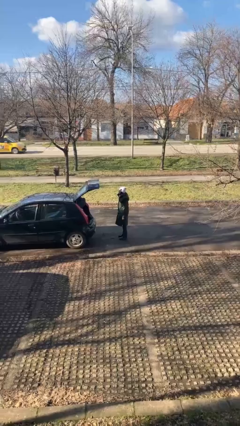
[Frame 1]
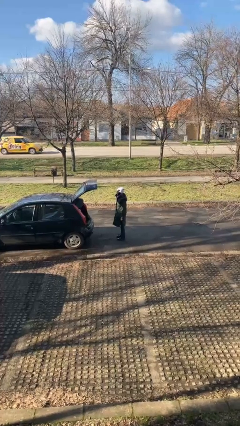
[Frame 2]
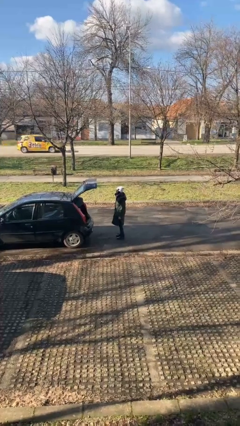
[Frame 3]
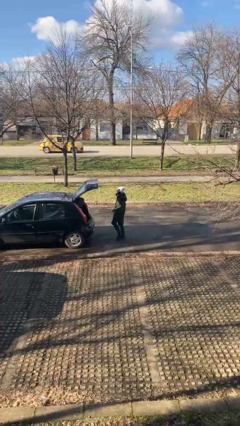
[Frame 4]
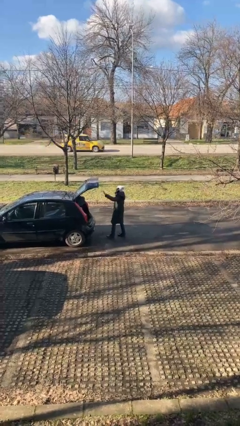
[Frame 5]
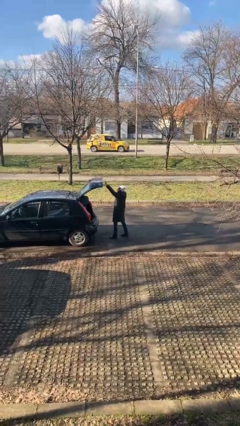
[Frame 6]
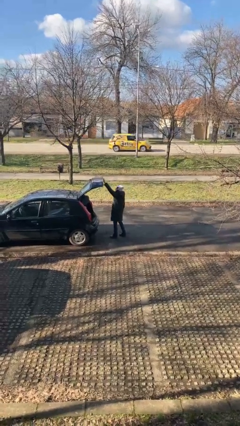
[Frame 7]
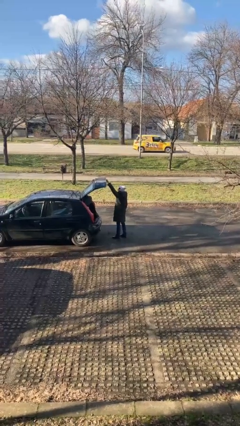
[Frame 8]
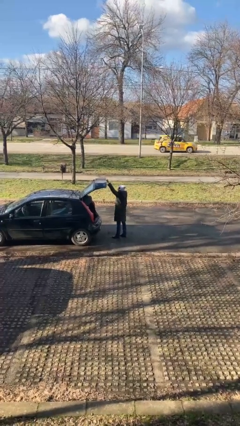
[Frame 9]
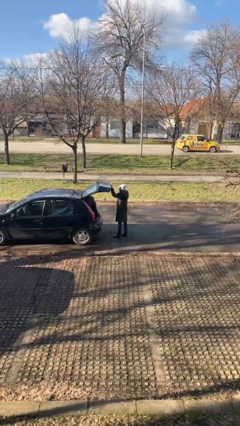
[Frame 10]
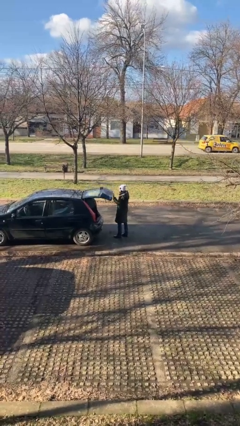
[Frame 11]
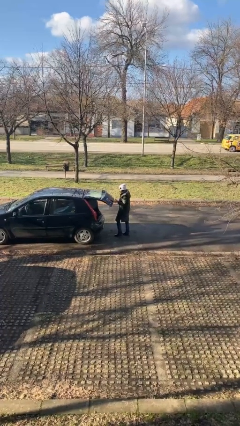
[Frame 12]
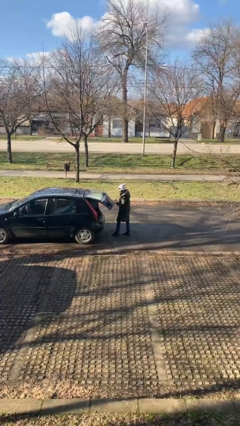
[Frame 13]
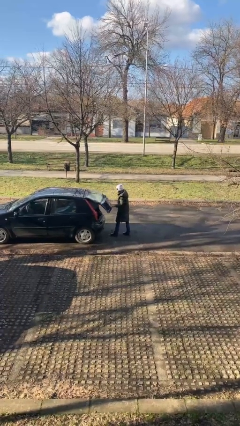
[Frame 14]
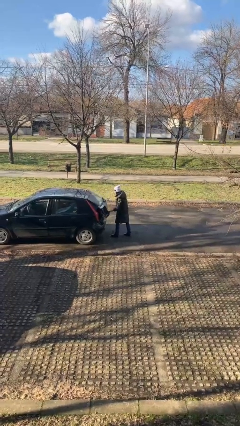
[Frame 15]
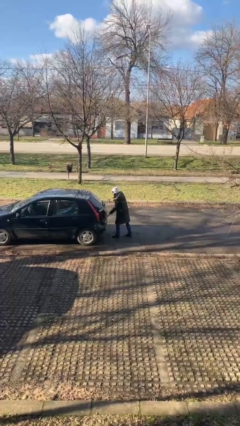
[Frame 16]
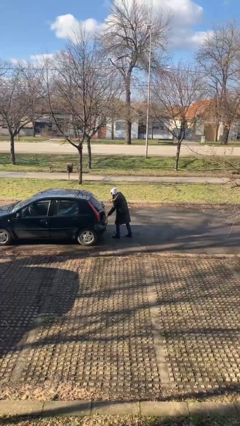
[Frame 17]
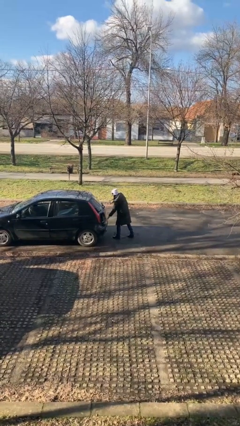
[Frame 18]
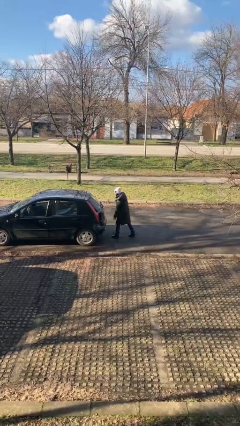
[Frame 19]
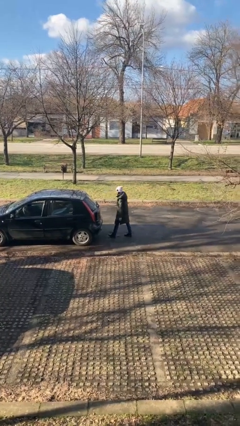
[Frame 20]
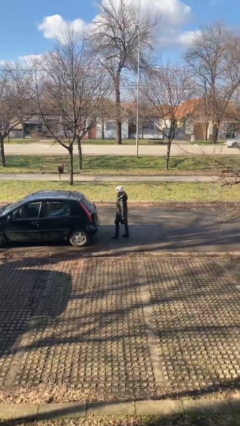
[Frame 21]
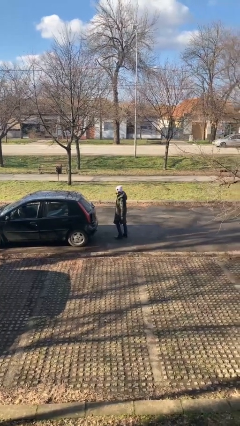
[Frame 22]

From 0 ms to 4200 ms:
person closes car trunk

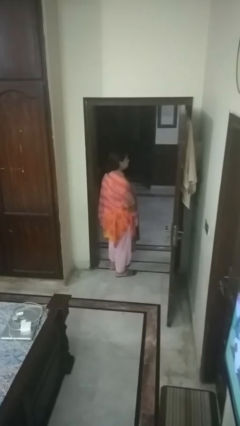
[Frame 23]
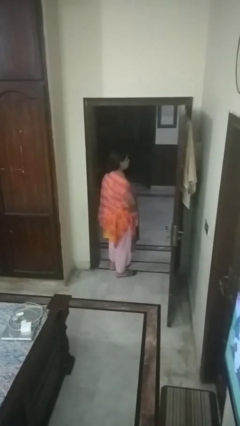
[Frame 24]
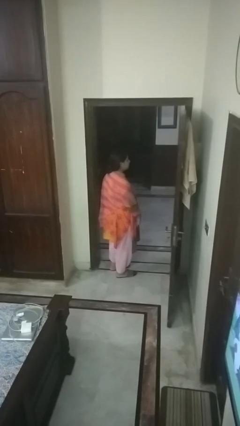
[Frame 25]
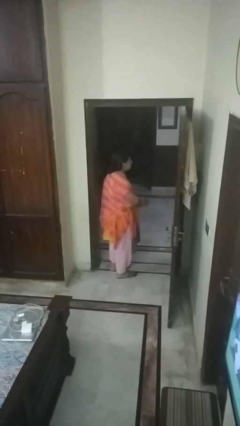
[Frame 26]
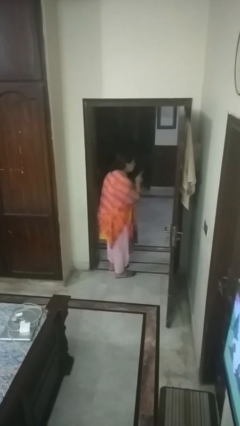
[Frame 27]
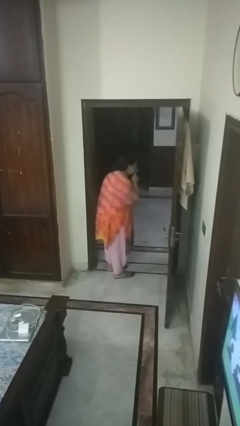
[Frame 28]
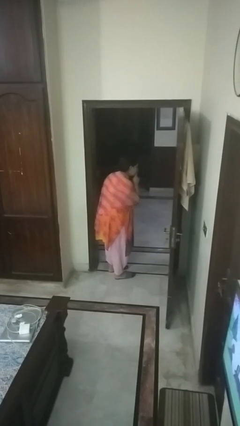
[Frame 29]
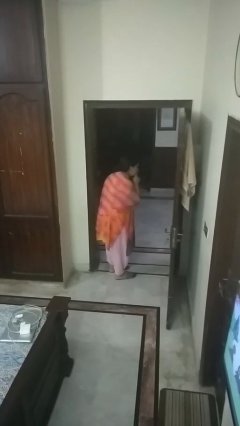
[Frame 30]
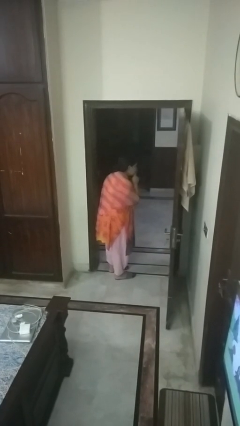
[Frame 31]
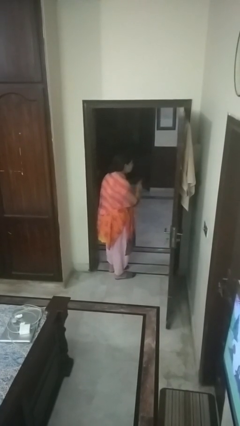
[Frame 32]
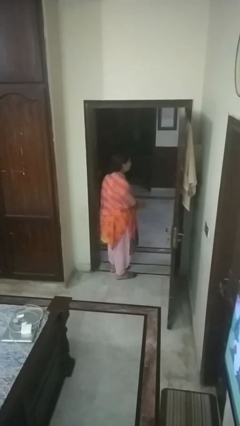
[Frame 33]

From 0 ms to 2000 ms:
person gestures be quiet

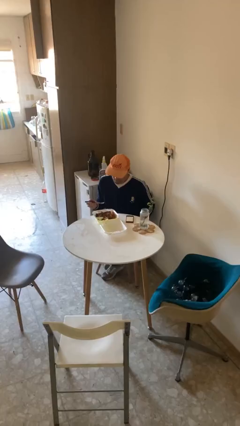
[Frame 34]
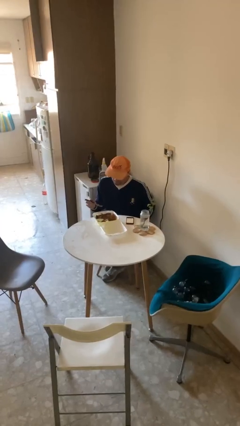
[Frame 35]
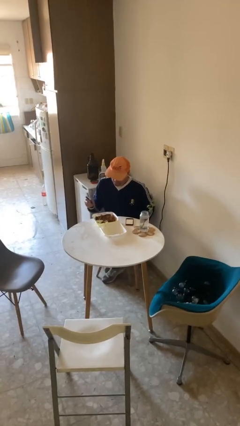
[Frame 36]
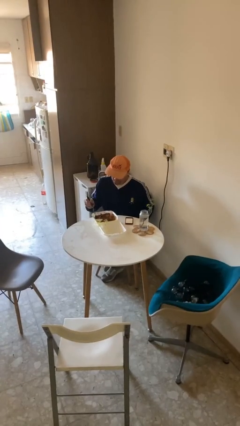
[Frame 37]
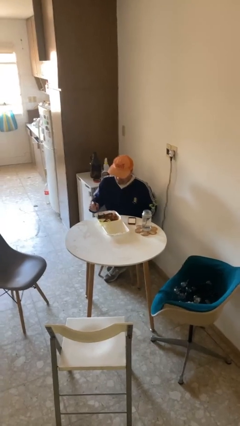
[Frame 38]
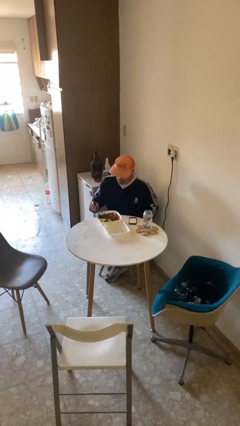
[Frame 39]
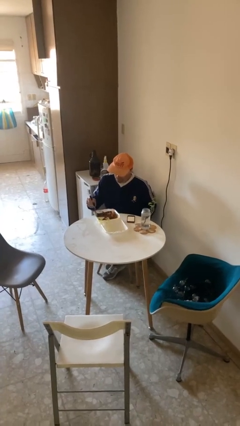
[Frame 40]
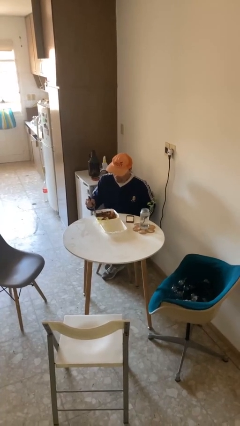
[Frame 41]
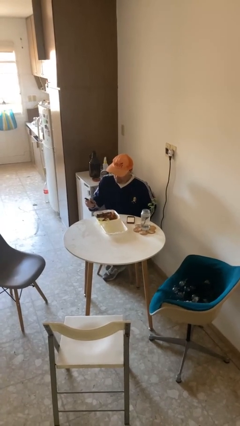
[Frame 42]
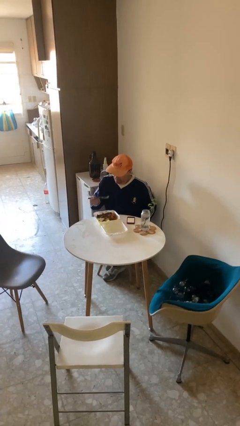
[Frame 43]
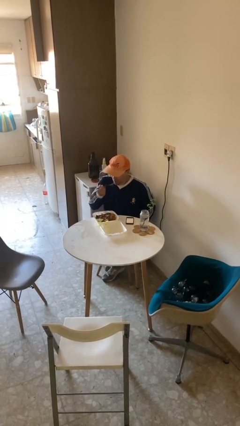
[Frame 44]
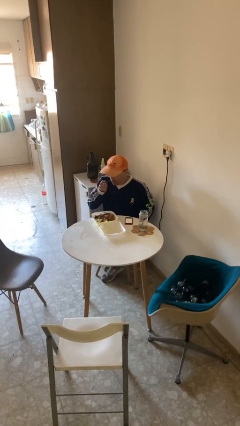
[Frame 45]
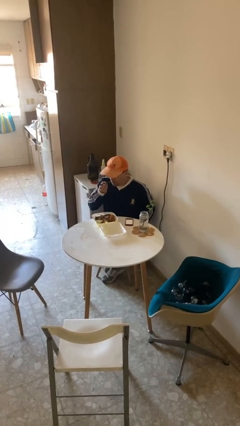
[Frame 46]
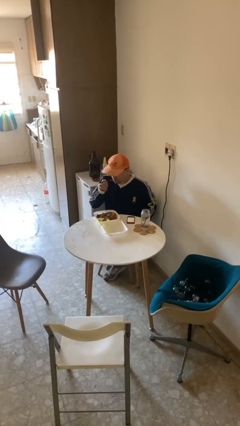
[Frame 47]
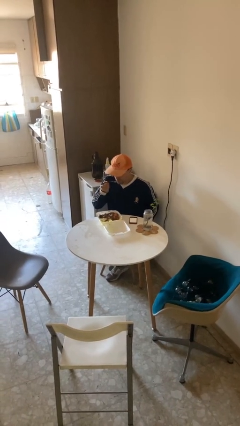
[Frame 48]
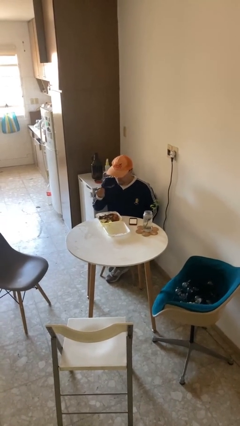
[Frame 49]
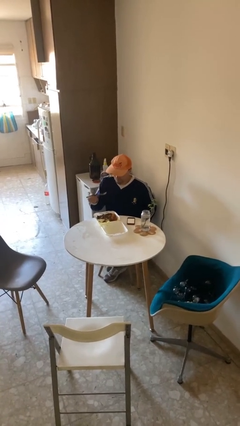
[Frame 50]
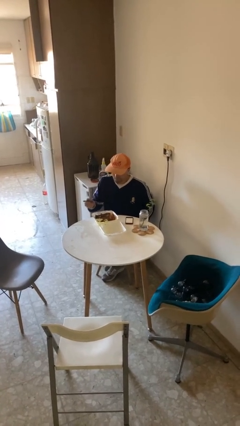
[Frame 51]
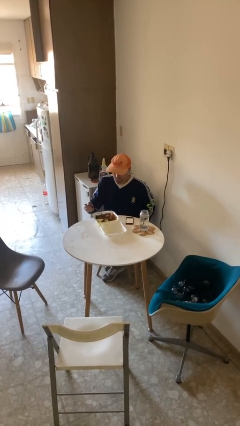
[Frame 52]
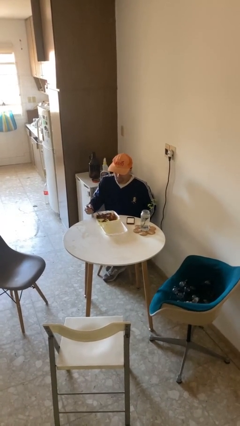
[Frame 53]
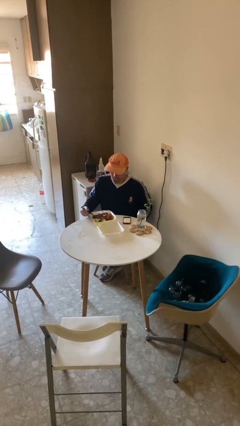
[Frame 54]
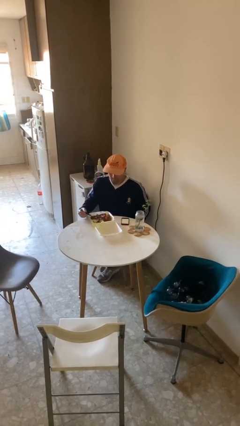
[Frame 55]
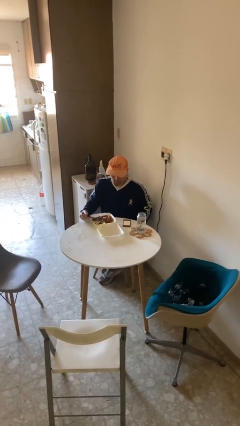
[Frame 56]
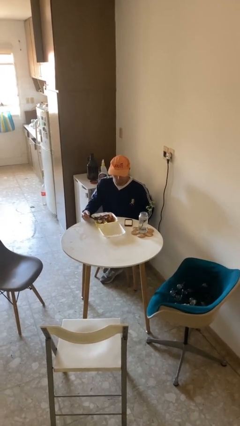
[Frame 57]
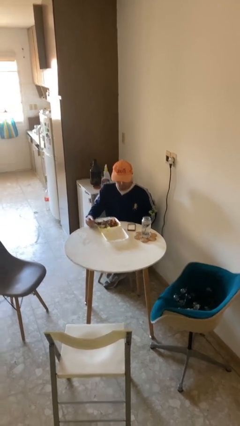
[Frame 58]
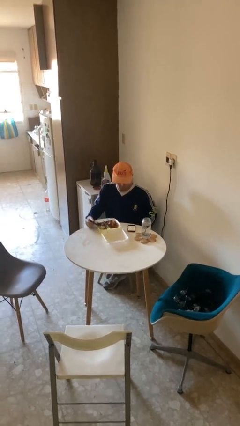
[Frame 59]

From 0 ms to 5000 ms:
person eats with utensil

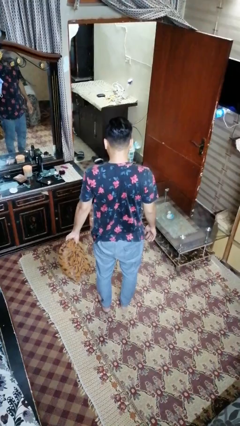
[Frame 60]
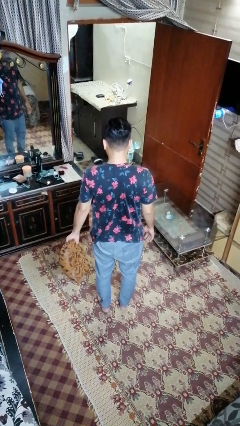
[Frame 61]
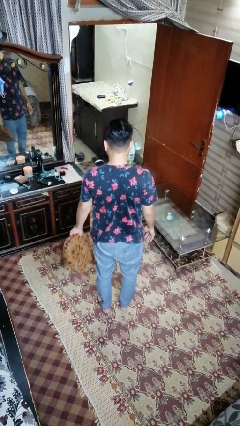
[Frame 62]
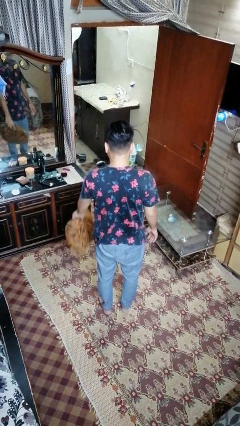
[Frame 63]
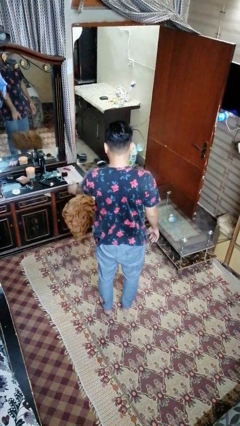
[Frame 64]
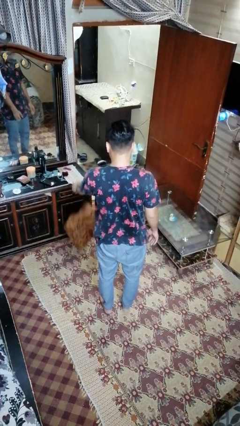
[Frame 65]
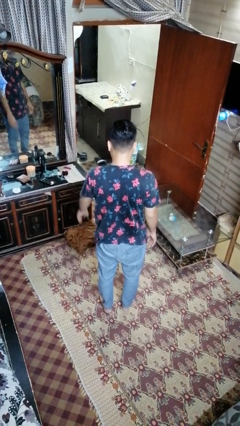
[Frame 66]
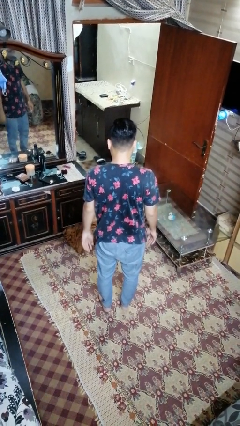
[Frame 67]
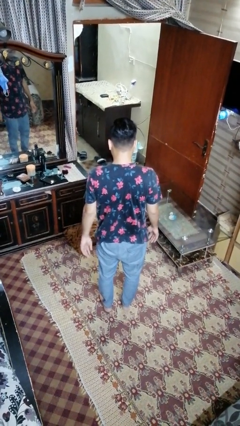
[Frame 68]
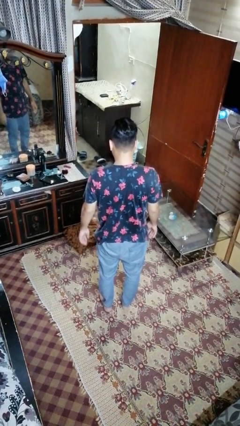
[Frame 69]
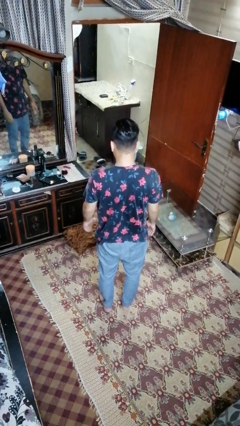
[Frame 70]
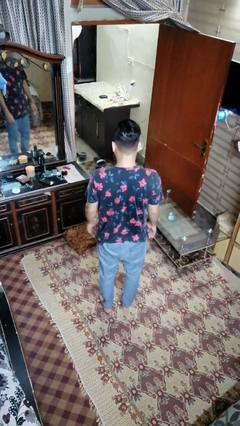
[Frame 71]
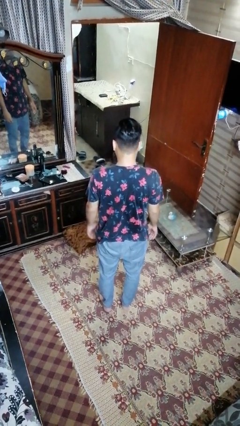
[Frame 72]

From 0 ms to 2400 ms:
person throws object to ground

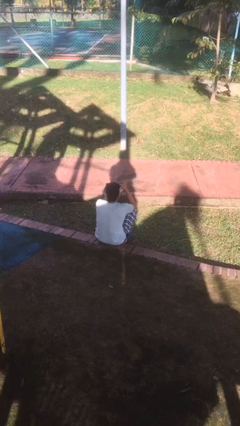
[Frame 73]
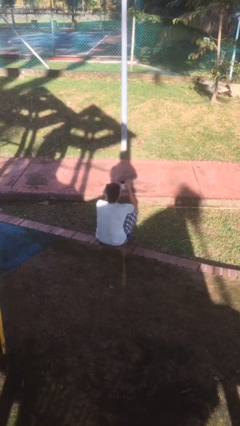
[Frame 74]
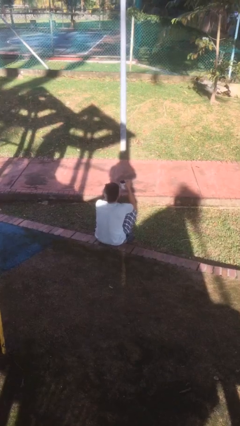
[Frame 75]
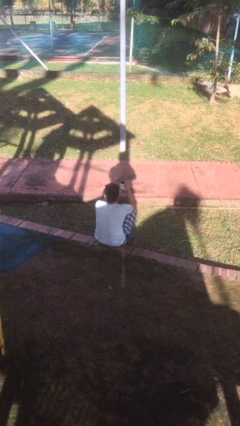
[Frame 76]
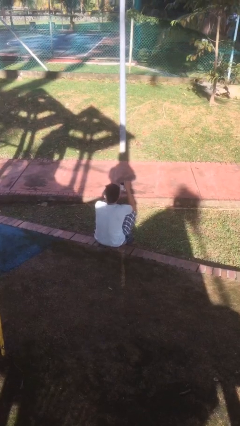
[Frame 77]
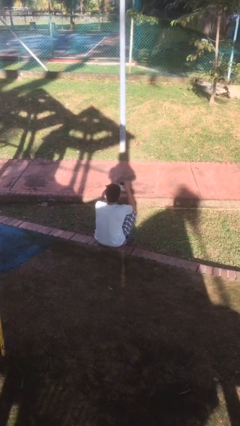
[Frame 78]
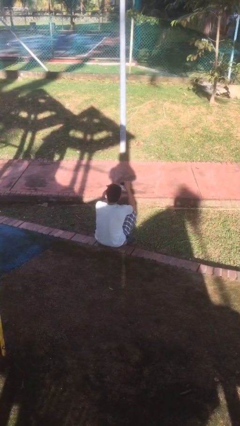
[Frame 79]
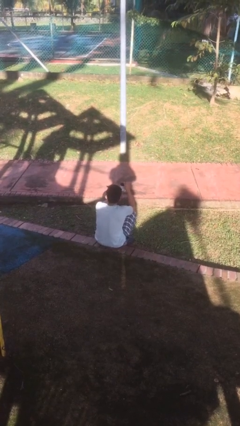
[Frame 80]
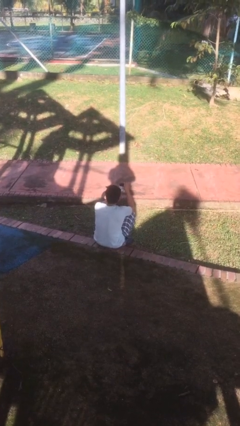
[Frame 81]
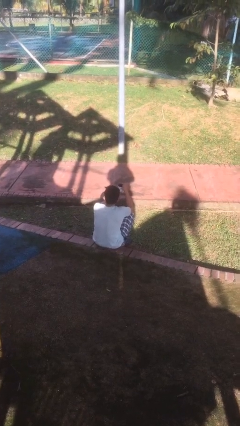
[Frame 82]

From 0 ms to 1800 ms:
person stirs mug

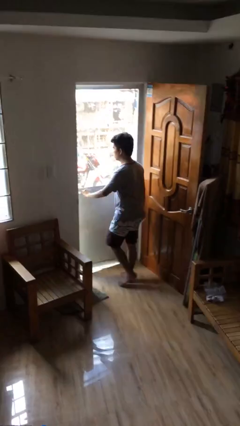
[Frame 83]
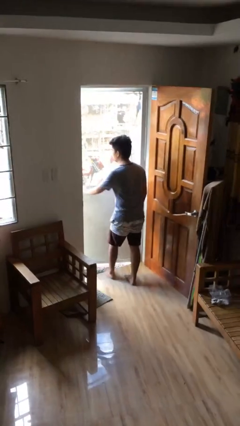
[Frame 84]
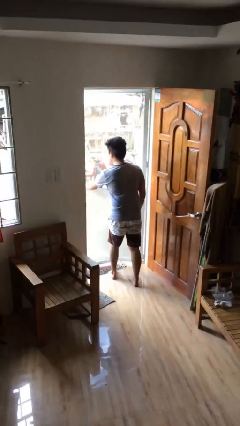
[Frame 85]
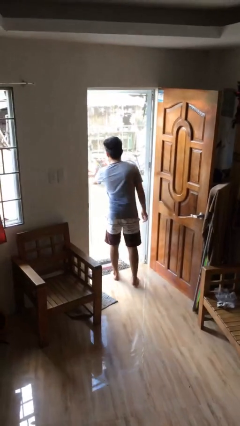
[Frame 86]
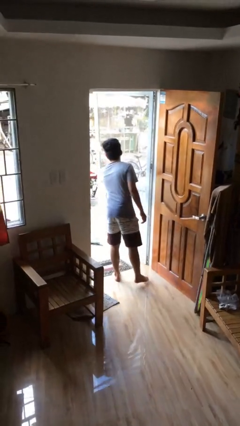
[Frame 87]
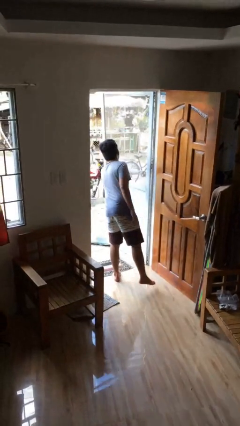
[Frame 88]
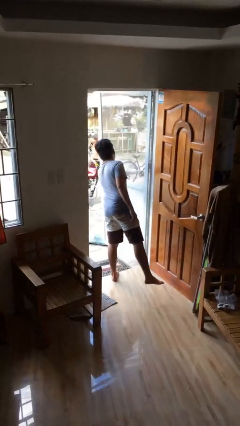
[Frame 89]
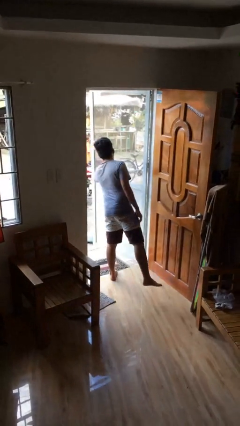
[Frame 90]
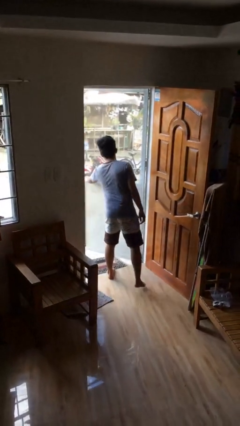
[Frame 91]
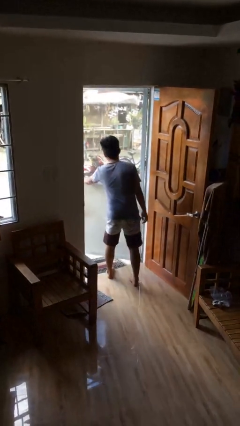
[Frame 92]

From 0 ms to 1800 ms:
person opens facility door
